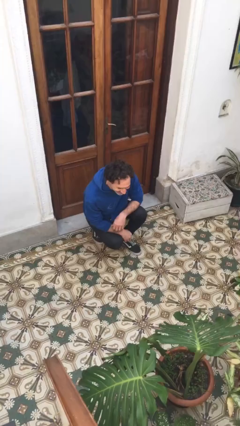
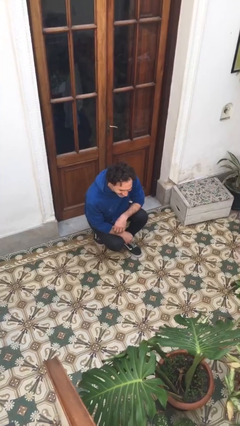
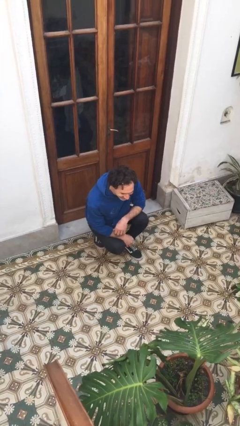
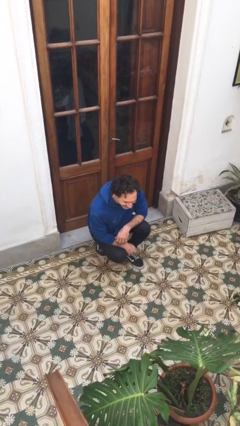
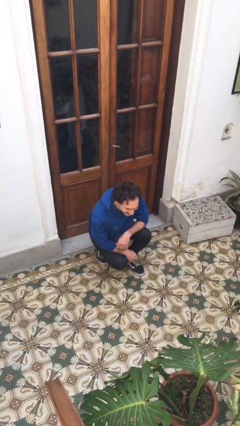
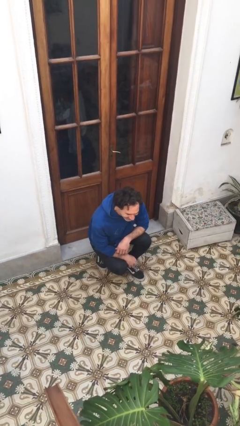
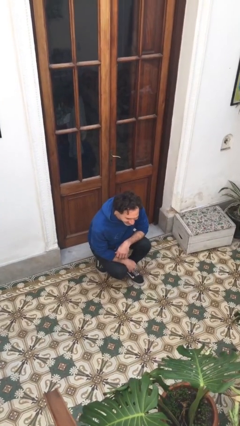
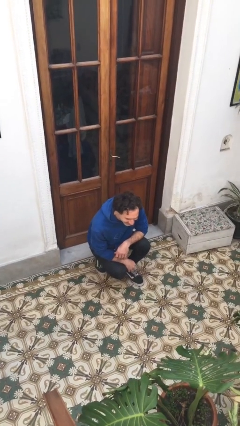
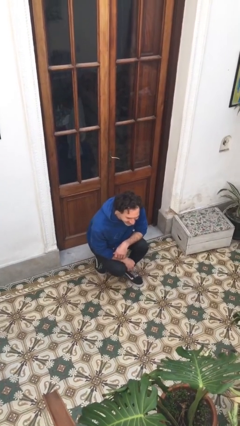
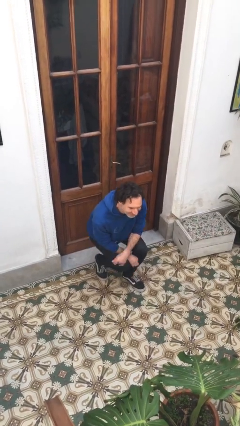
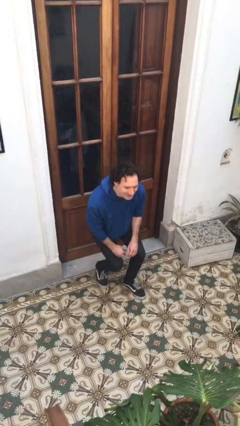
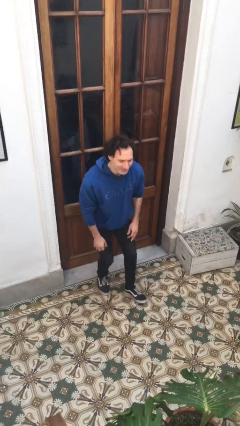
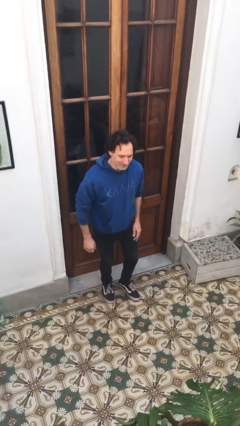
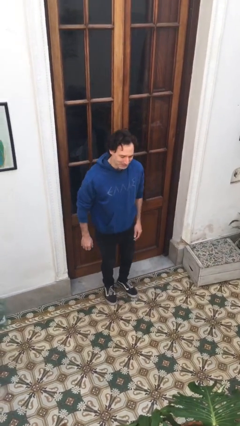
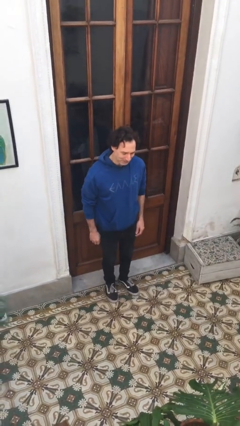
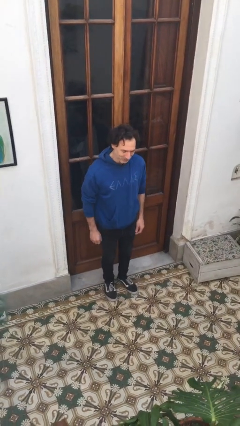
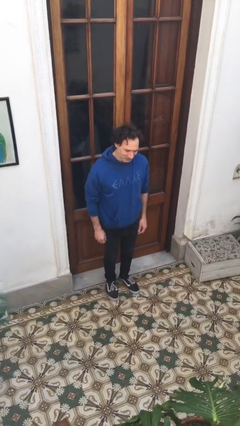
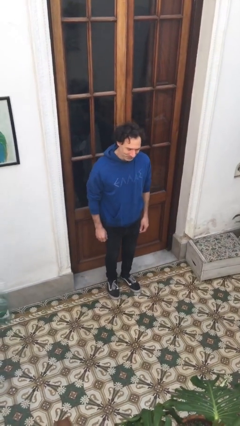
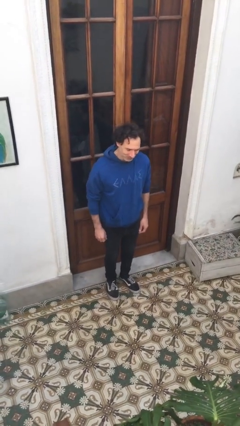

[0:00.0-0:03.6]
person stands up

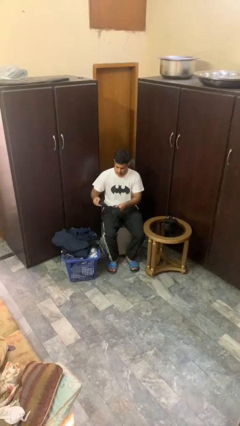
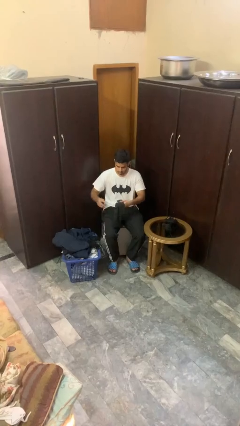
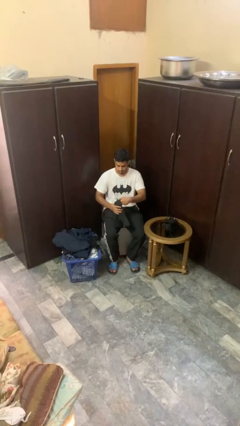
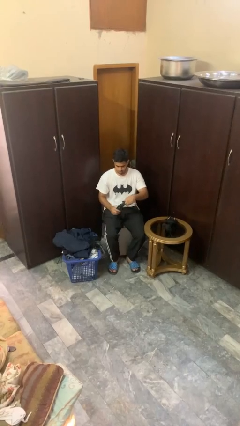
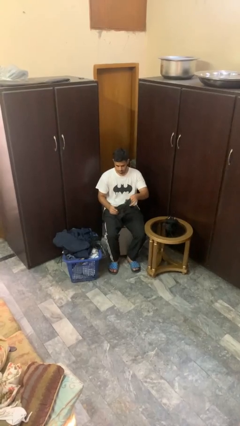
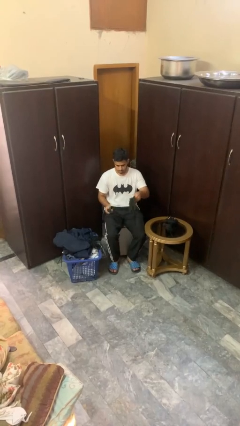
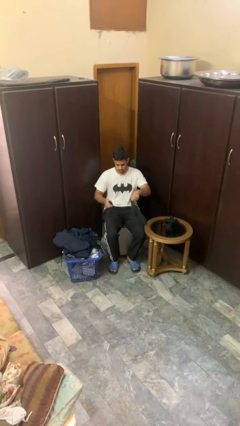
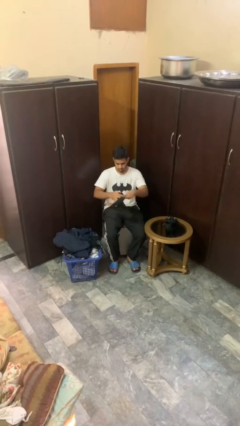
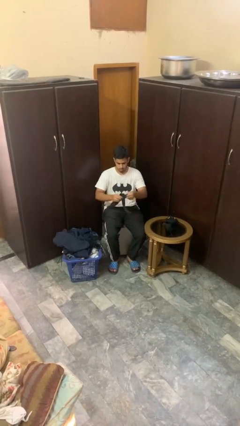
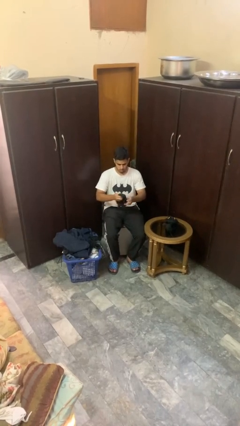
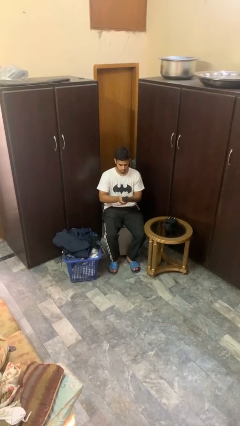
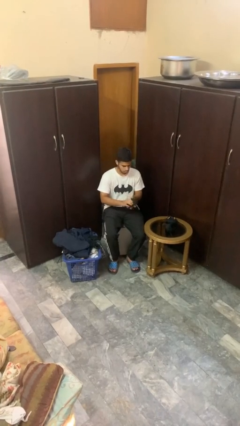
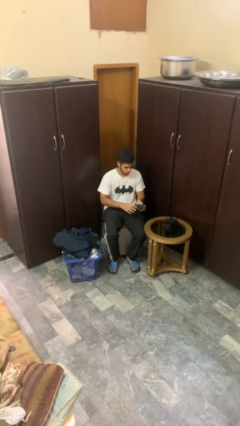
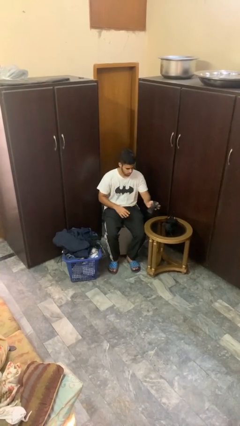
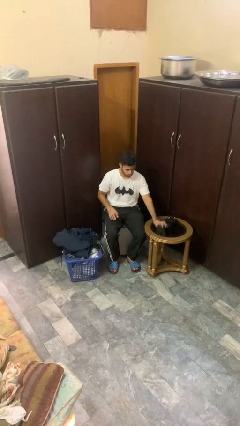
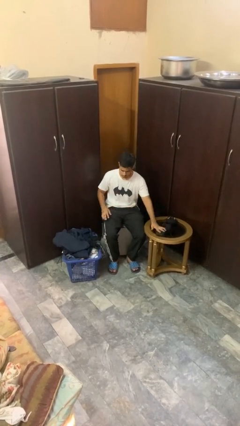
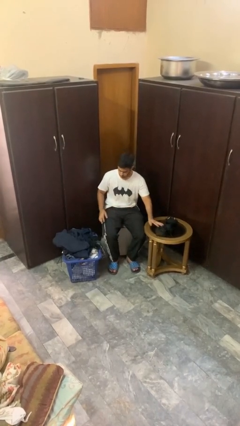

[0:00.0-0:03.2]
person folds socks

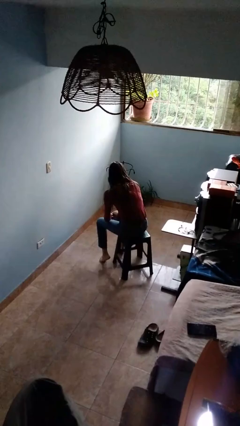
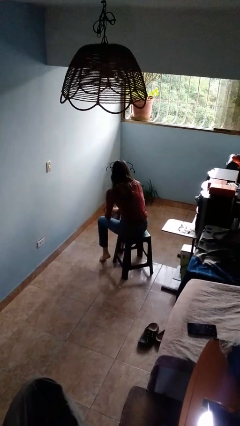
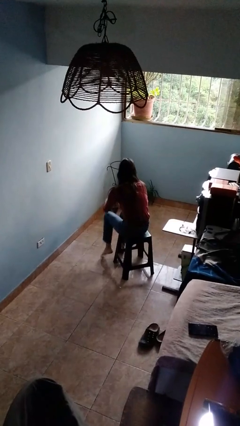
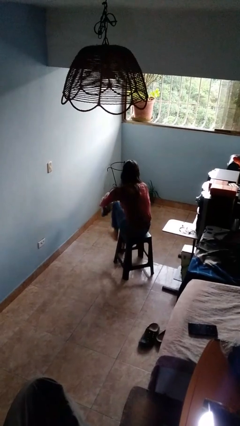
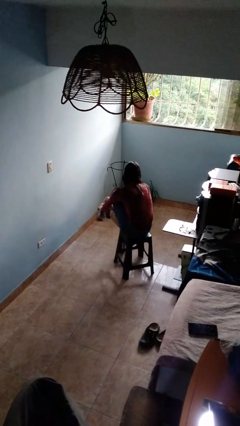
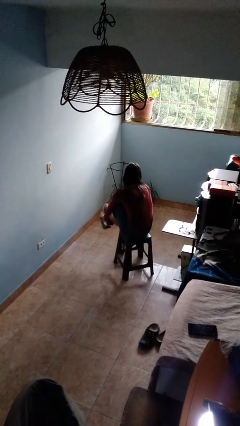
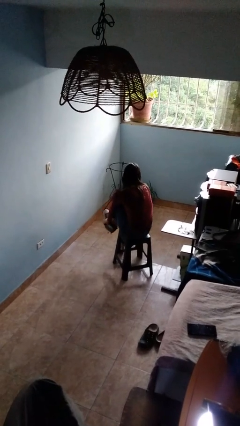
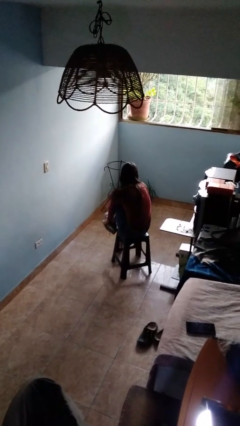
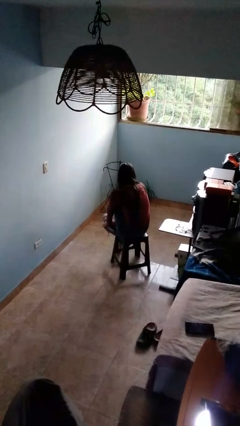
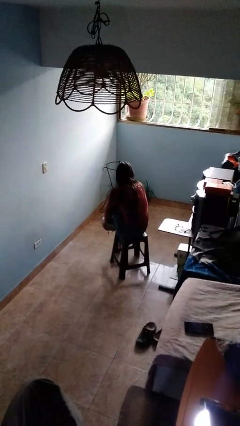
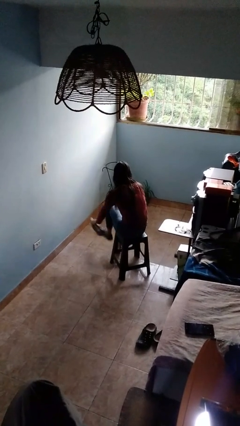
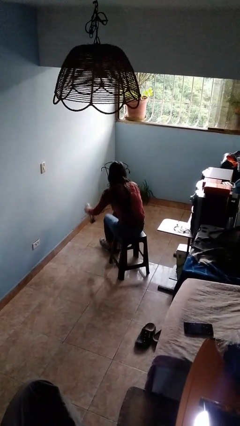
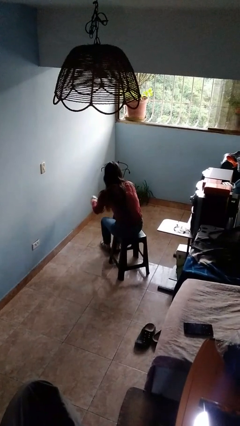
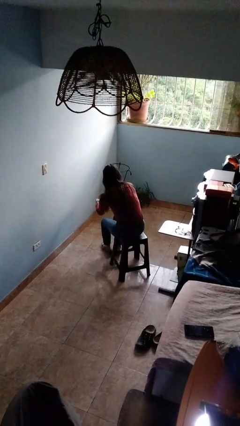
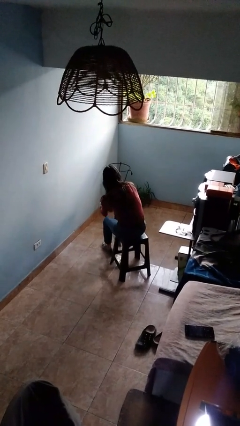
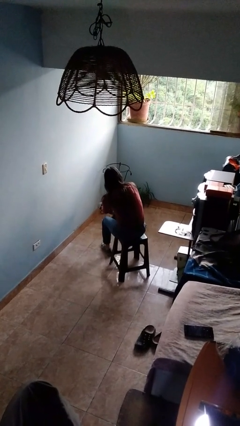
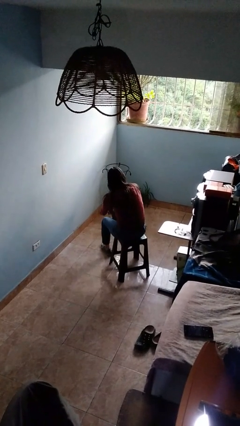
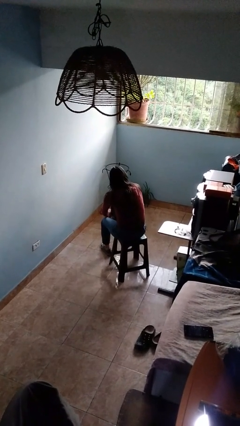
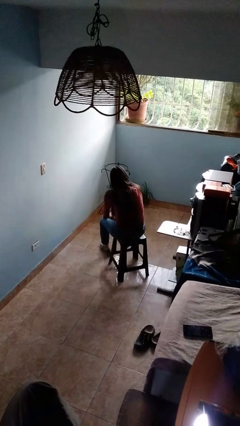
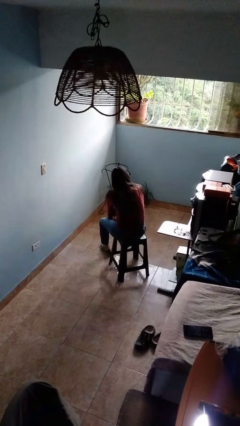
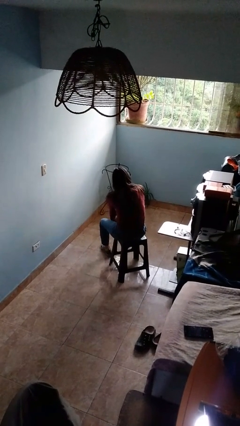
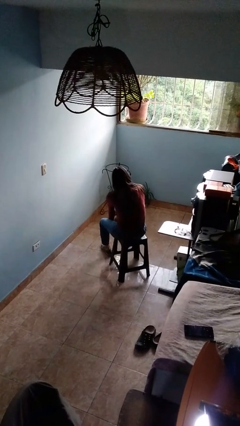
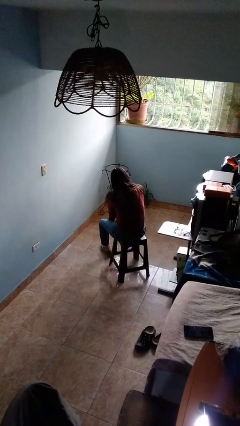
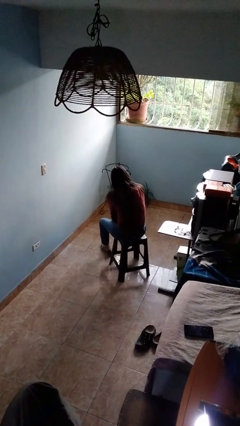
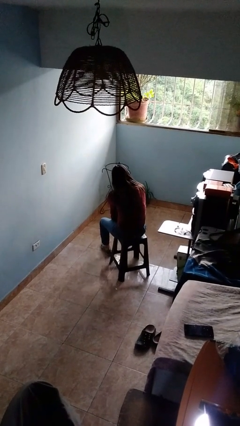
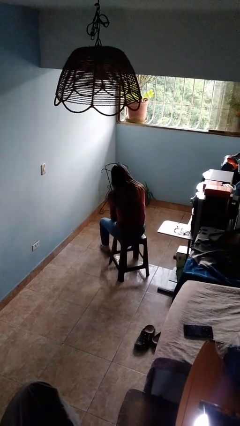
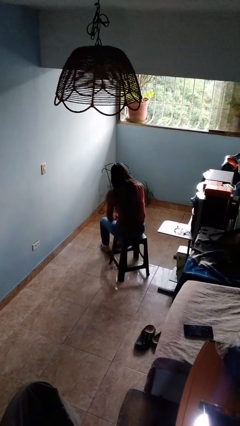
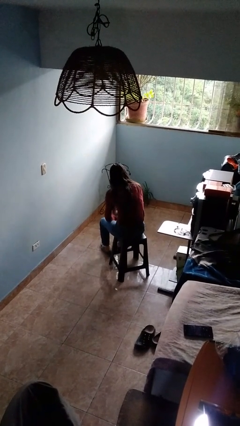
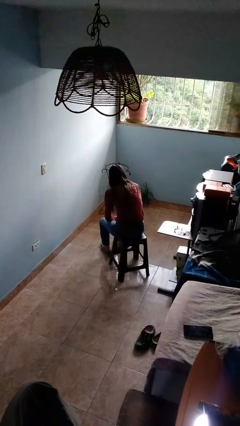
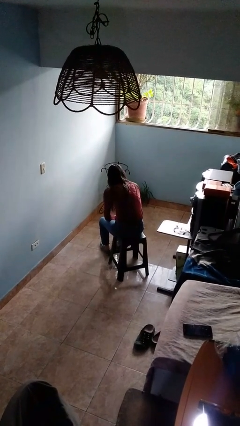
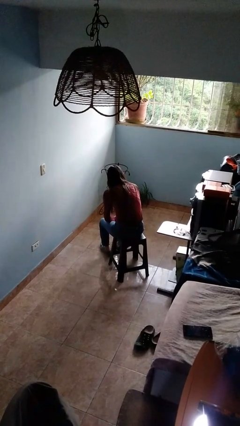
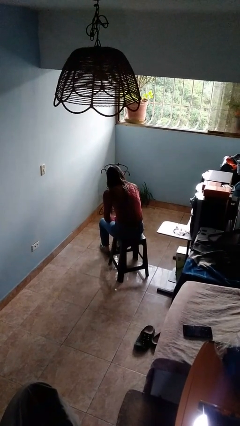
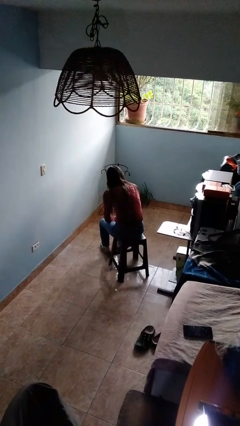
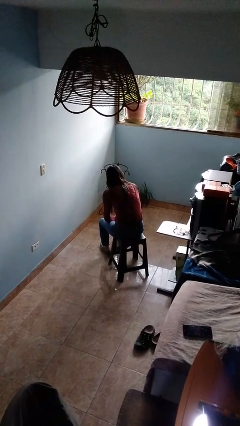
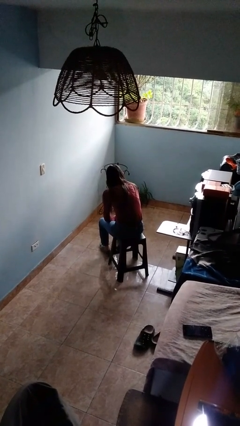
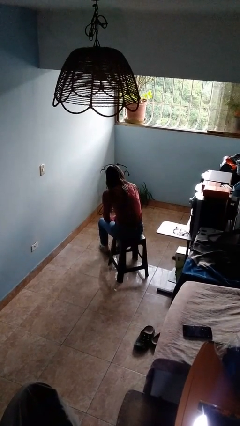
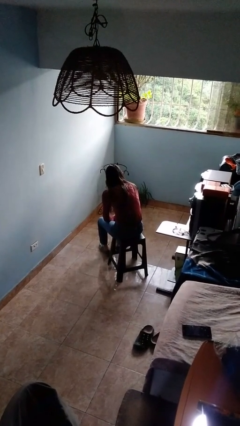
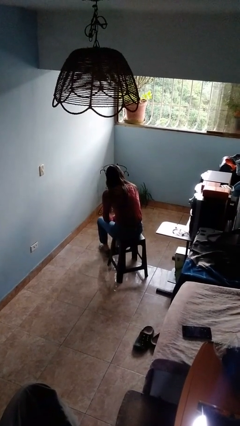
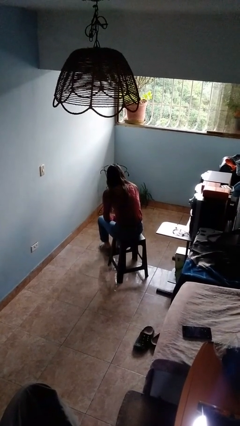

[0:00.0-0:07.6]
person puts on shoes

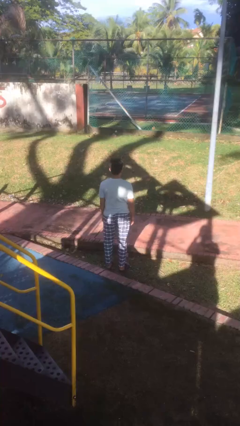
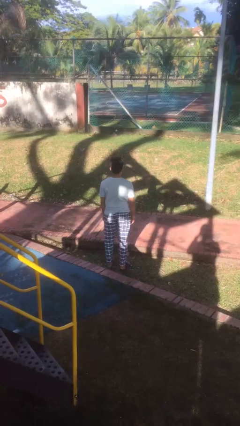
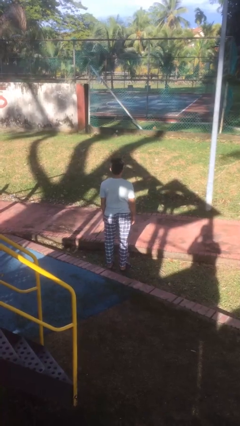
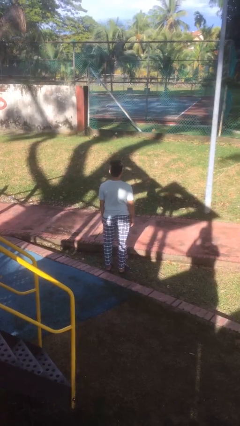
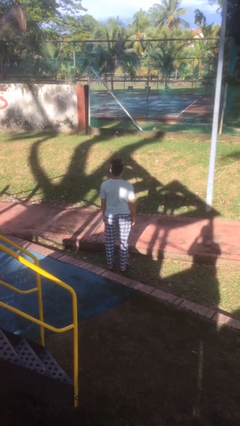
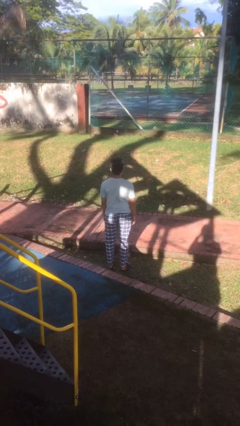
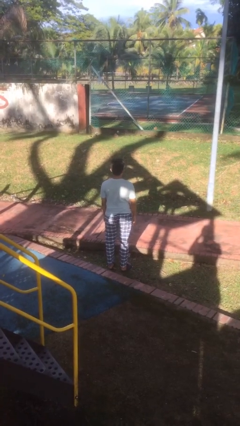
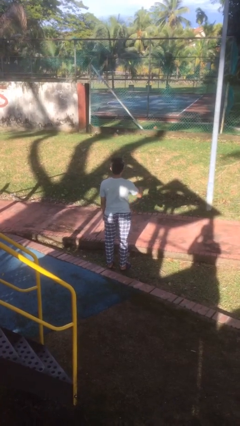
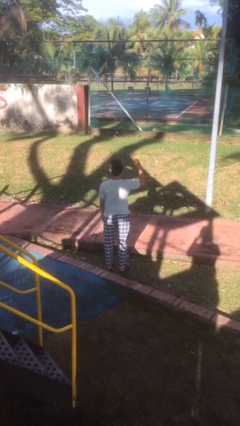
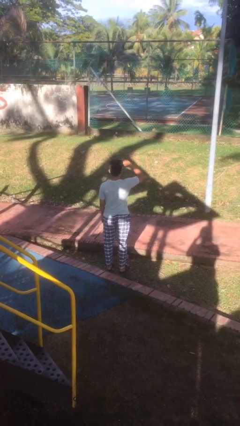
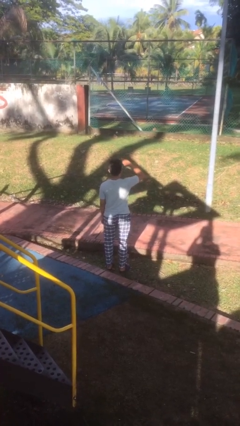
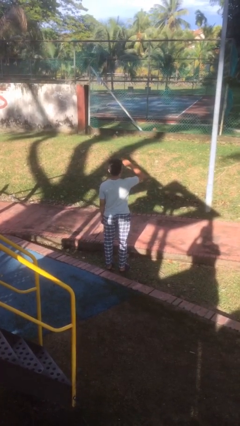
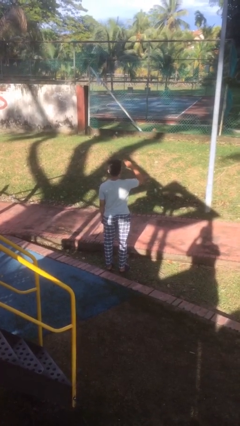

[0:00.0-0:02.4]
person salutes

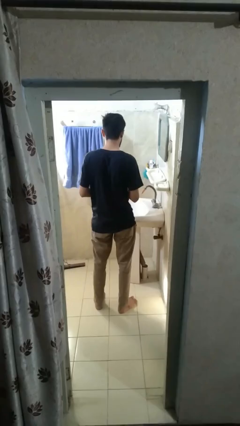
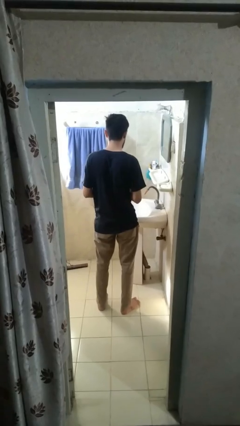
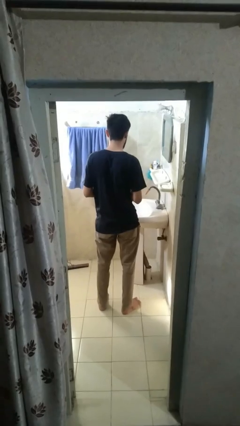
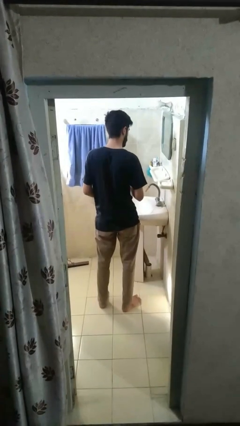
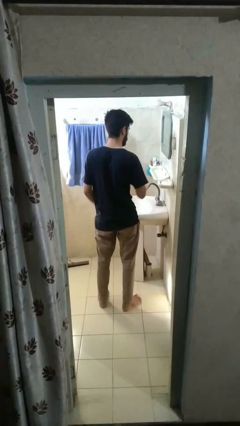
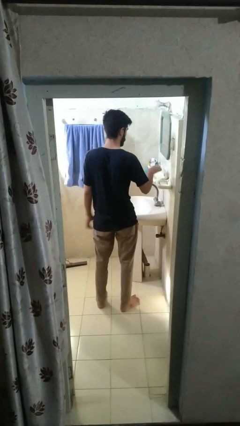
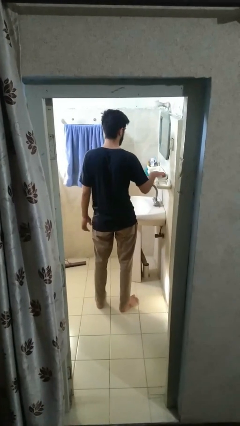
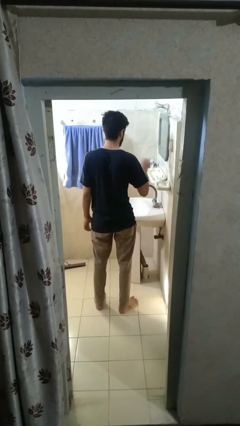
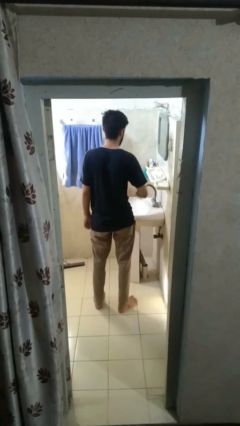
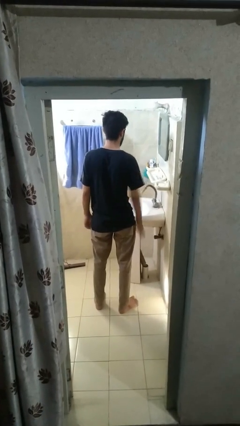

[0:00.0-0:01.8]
person puts down object on countertop
